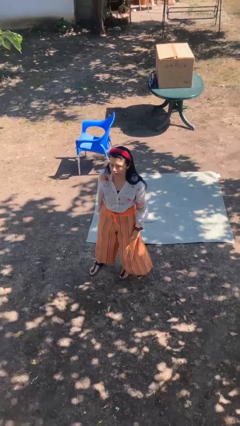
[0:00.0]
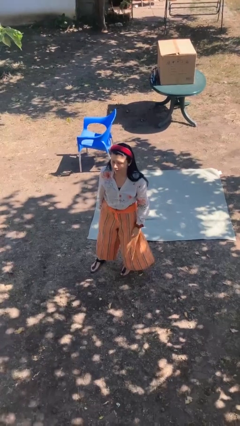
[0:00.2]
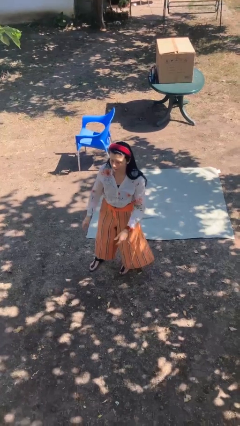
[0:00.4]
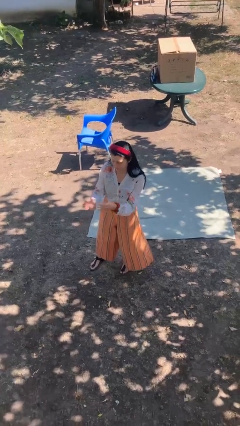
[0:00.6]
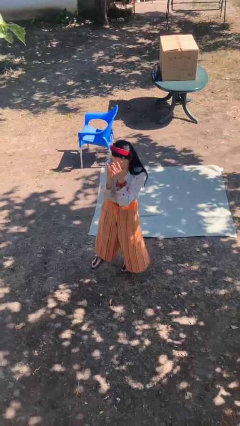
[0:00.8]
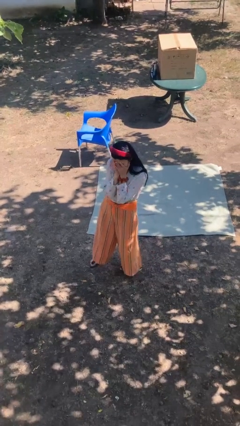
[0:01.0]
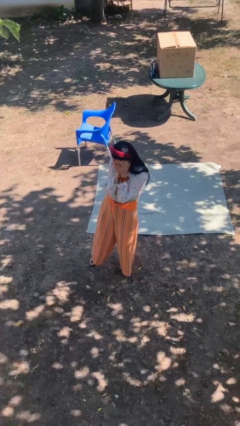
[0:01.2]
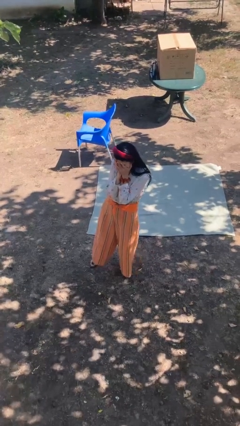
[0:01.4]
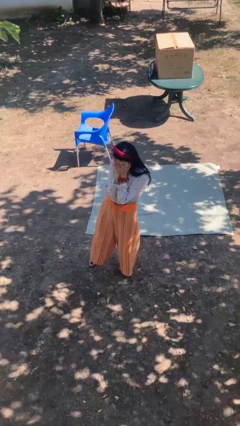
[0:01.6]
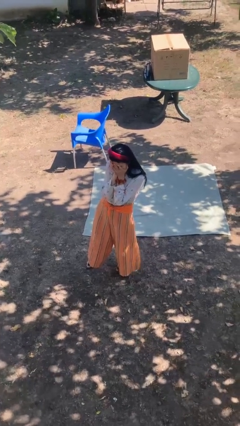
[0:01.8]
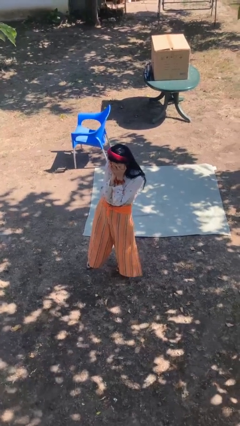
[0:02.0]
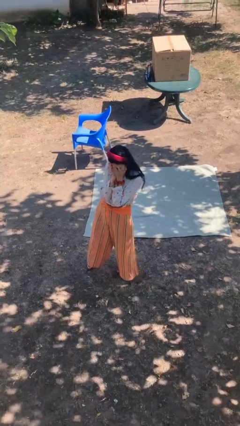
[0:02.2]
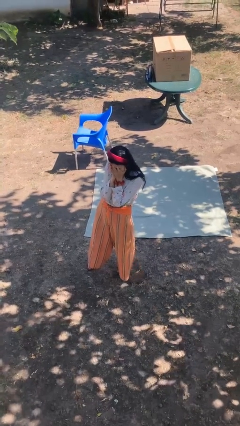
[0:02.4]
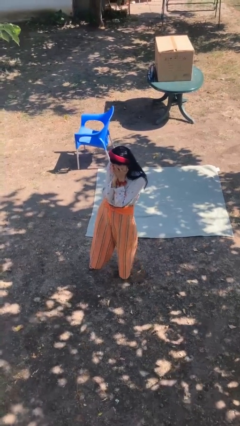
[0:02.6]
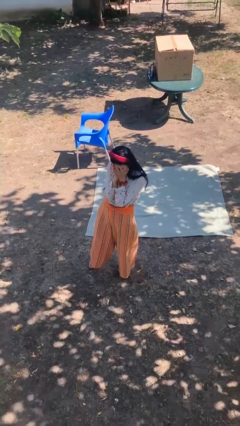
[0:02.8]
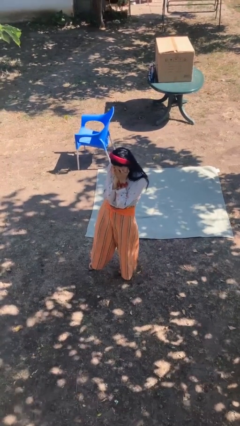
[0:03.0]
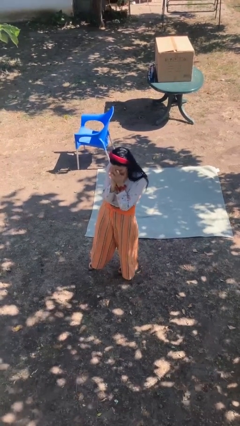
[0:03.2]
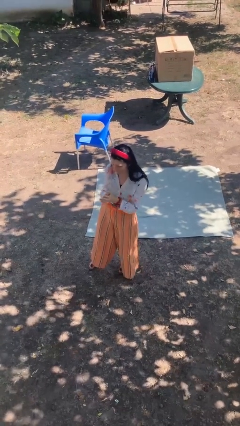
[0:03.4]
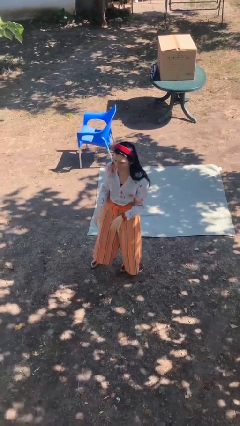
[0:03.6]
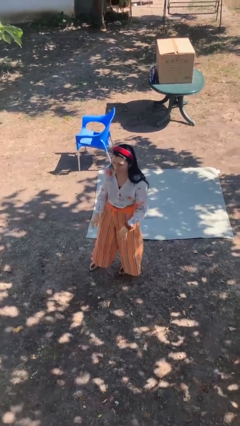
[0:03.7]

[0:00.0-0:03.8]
person covers face with hands

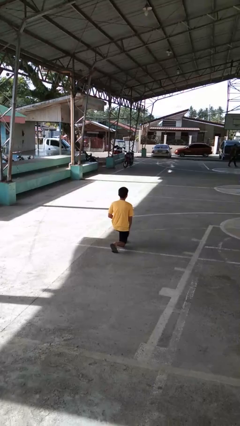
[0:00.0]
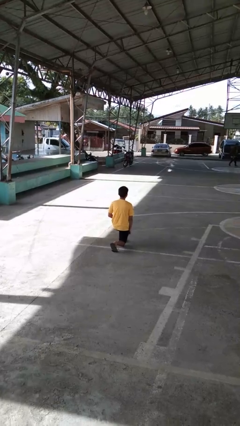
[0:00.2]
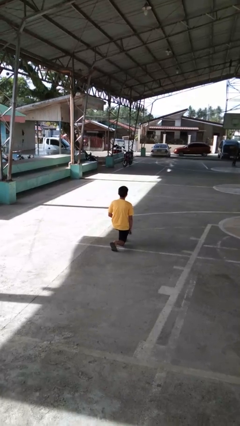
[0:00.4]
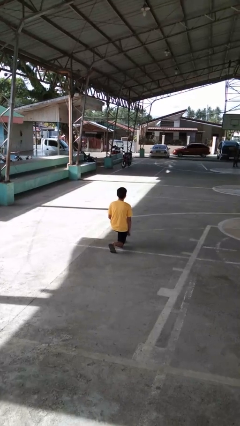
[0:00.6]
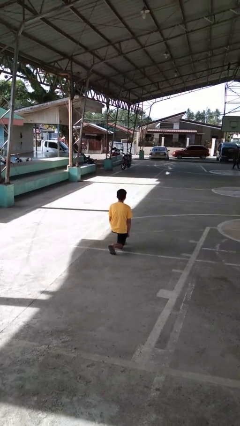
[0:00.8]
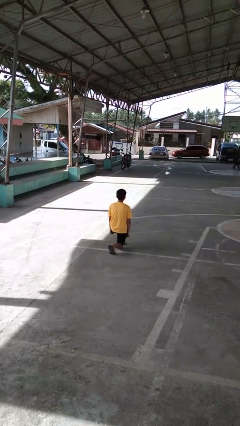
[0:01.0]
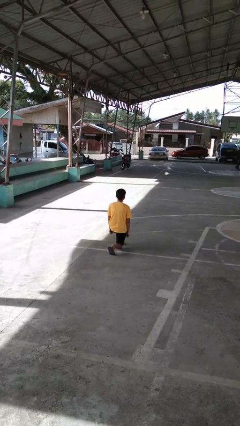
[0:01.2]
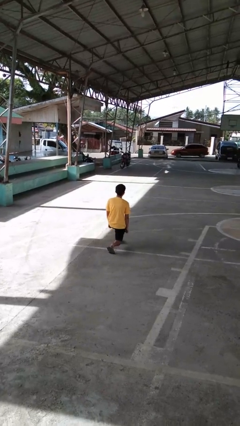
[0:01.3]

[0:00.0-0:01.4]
person kneels

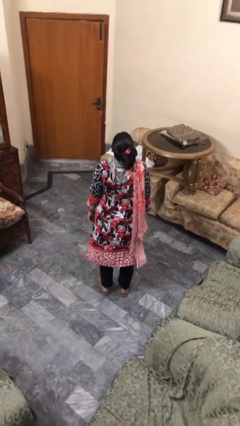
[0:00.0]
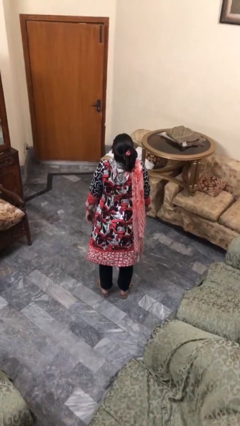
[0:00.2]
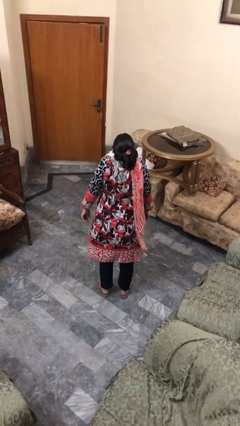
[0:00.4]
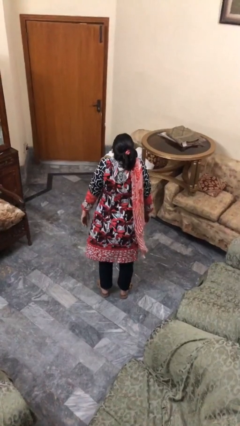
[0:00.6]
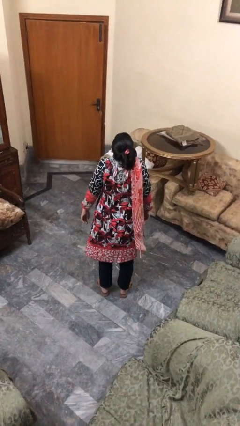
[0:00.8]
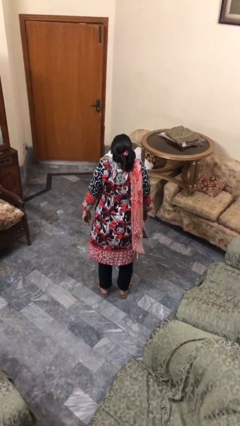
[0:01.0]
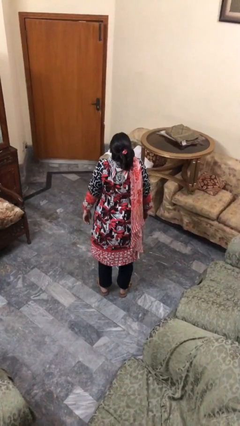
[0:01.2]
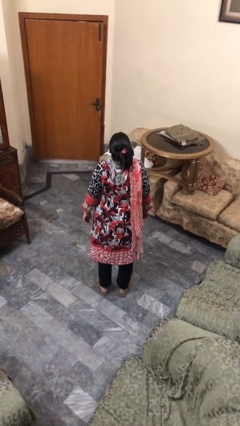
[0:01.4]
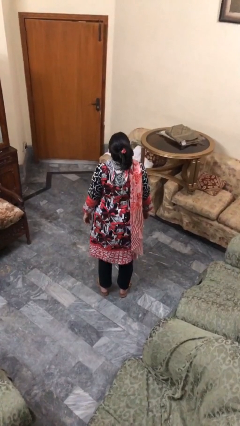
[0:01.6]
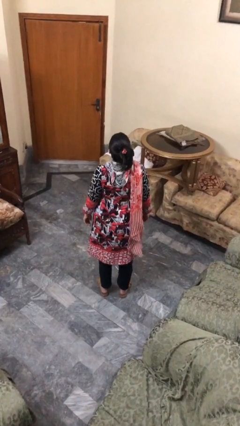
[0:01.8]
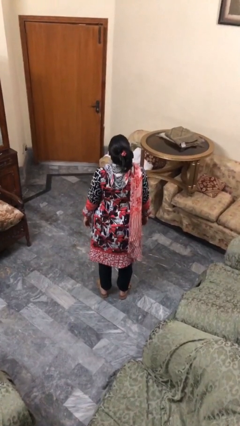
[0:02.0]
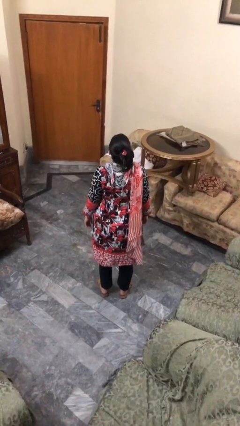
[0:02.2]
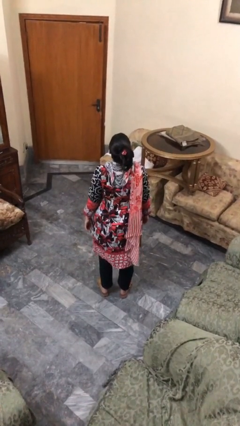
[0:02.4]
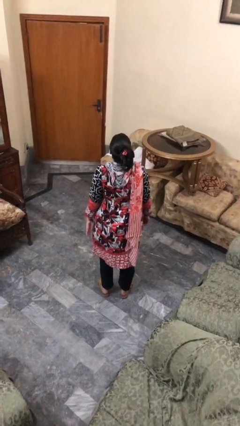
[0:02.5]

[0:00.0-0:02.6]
person shrugs

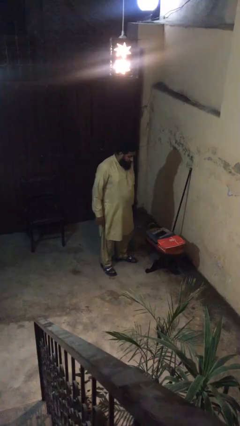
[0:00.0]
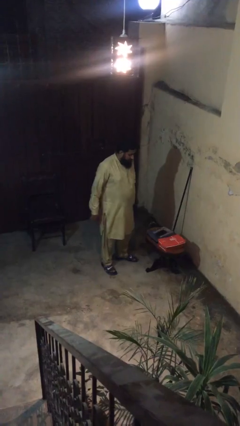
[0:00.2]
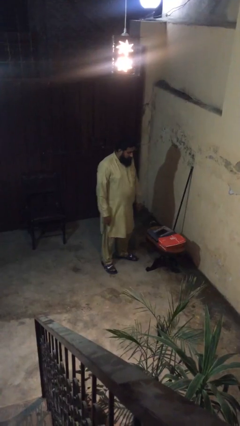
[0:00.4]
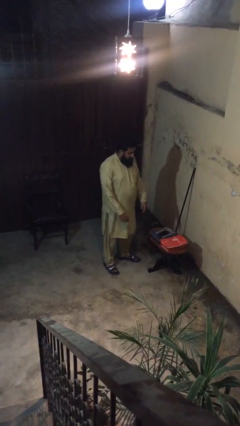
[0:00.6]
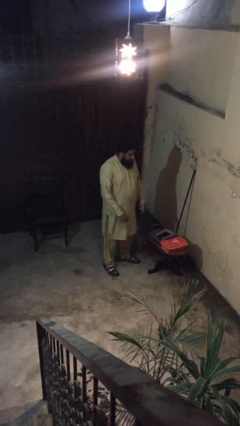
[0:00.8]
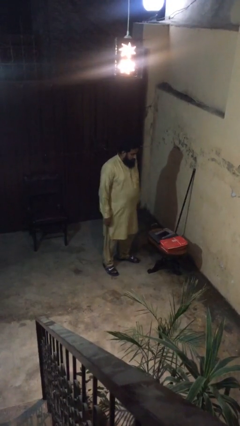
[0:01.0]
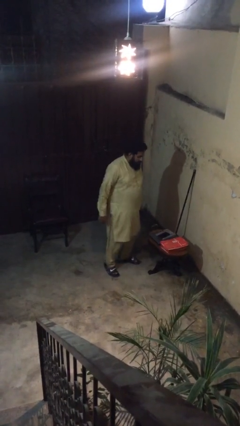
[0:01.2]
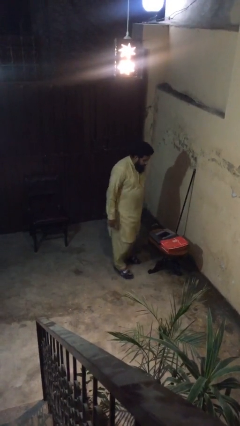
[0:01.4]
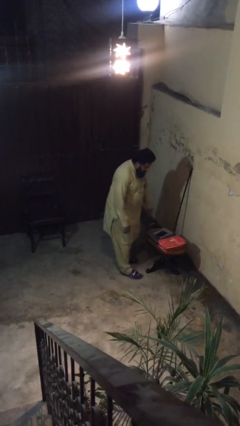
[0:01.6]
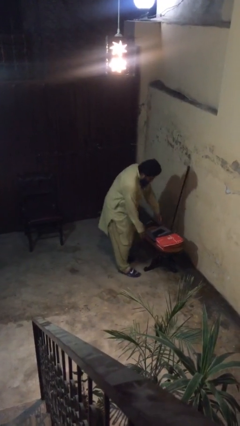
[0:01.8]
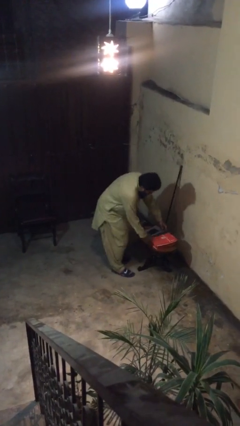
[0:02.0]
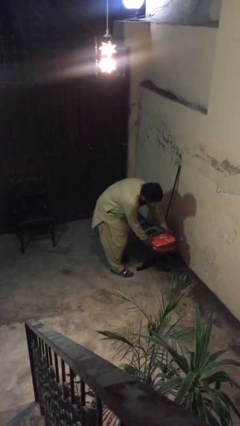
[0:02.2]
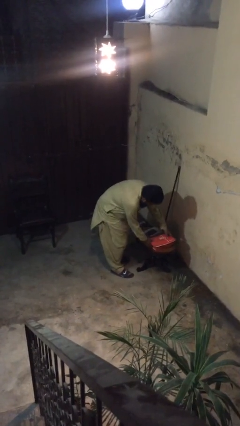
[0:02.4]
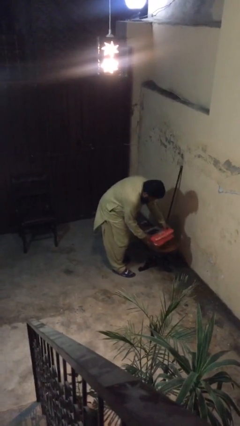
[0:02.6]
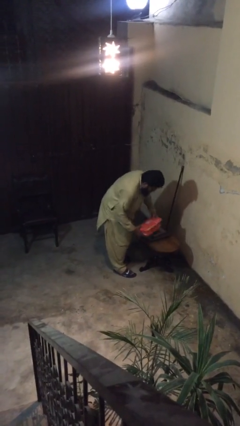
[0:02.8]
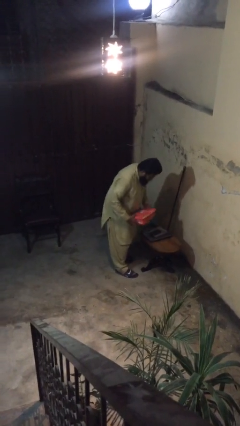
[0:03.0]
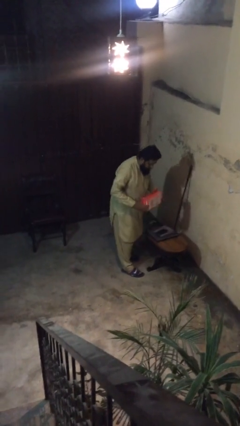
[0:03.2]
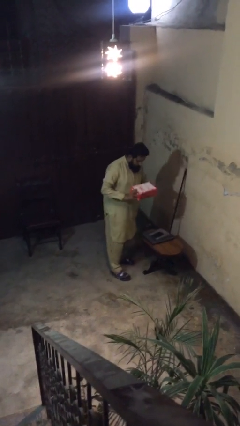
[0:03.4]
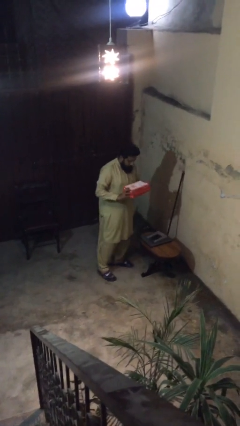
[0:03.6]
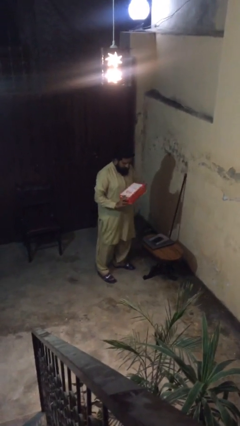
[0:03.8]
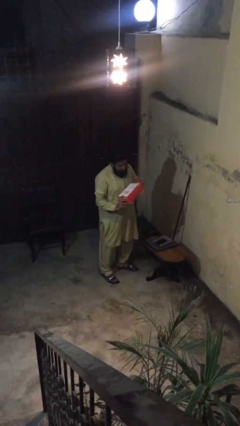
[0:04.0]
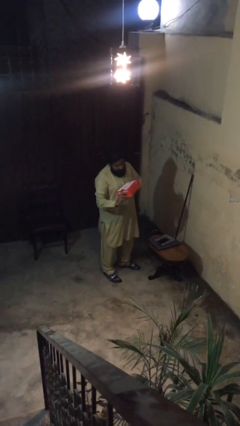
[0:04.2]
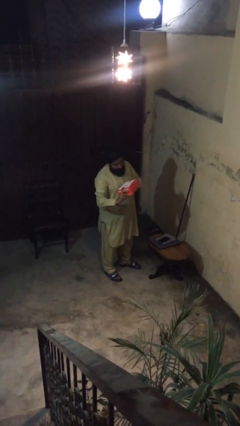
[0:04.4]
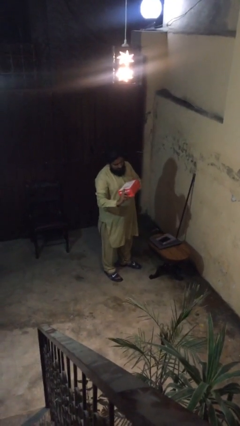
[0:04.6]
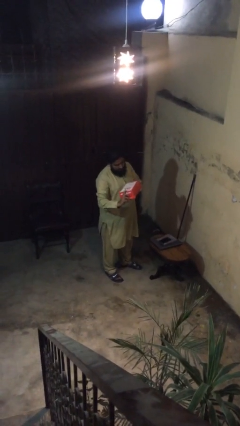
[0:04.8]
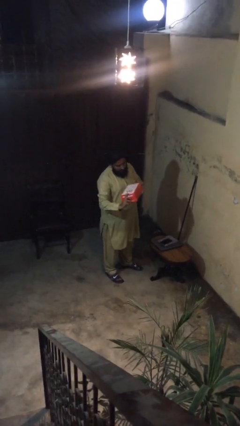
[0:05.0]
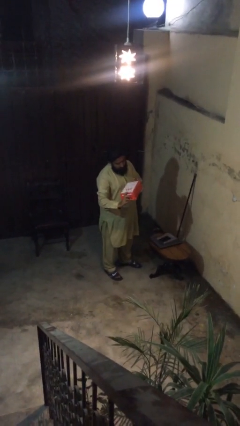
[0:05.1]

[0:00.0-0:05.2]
person picks up object from table

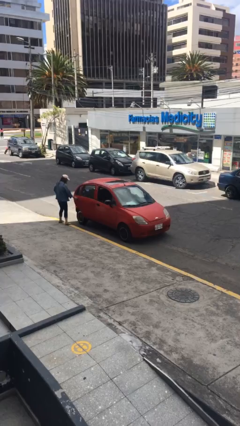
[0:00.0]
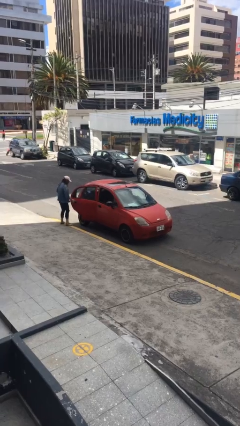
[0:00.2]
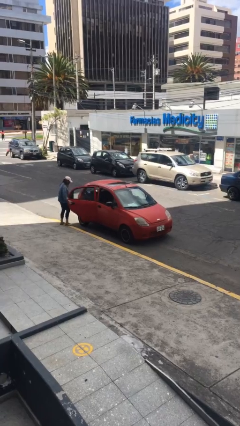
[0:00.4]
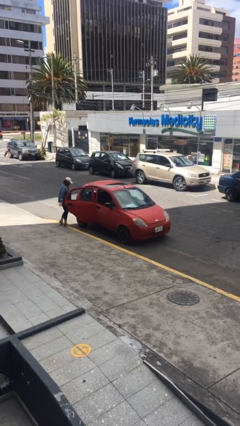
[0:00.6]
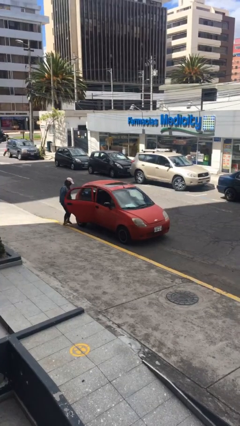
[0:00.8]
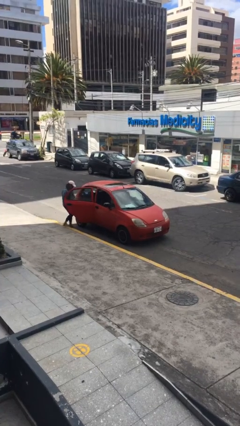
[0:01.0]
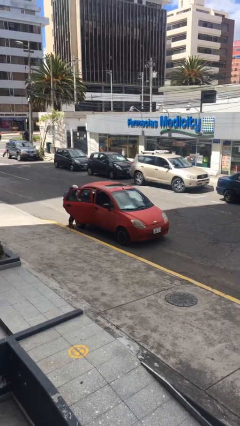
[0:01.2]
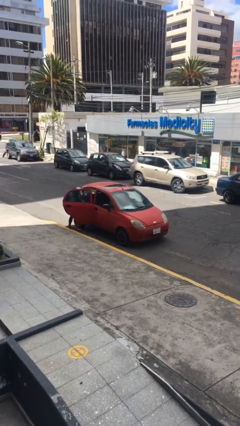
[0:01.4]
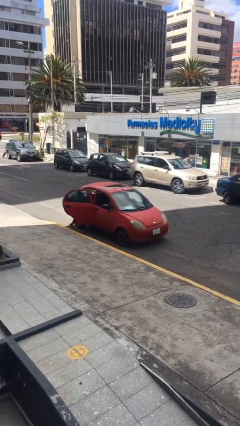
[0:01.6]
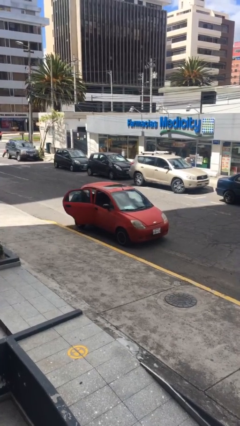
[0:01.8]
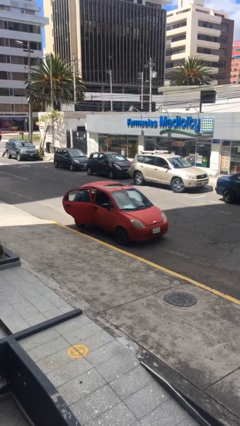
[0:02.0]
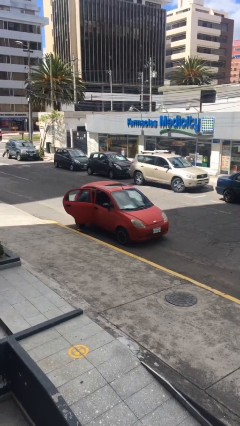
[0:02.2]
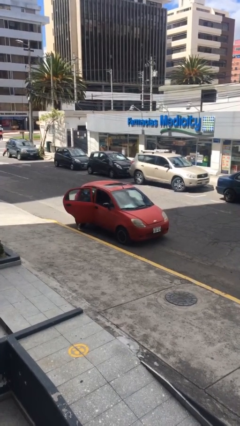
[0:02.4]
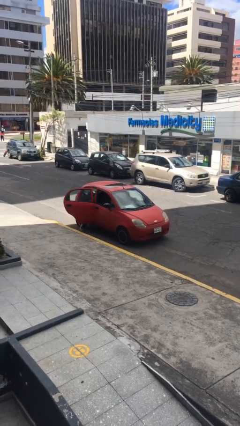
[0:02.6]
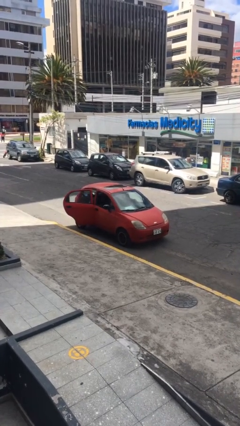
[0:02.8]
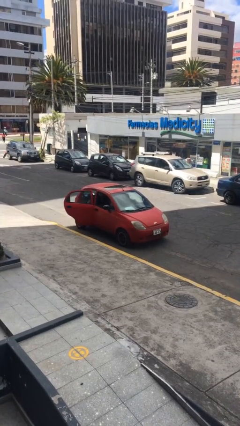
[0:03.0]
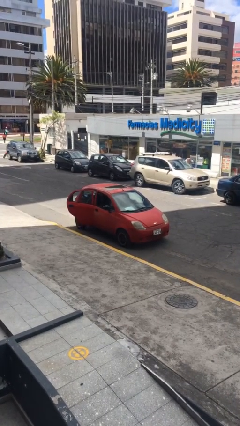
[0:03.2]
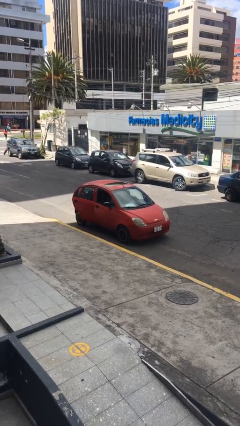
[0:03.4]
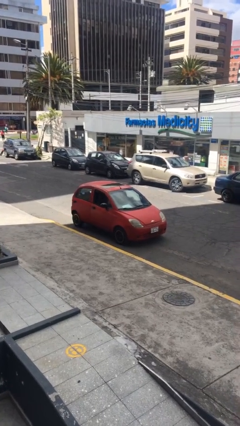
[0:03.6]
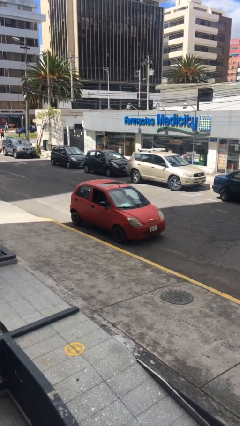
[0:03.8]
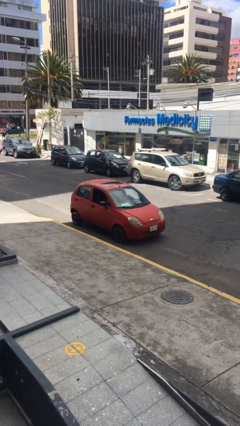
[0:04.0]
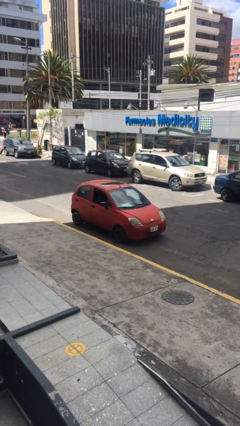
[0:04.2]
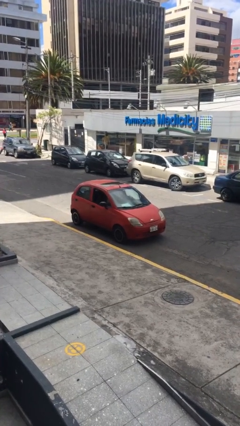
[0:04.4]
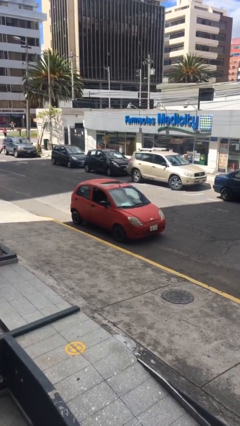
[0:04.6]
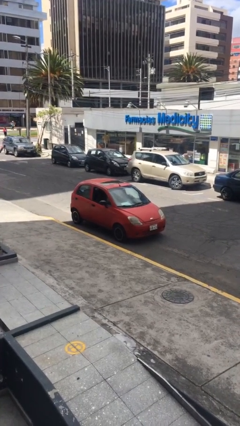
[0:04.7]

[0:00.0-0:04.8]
car picks up person
